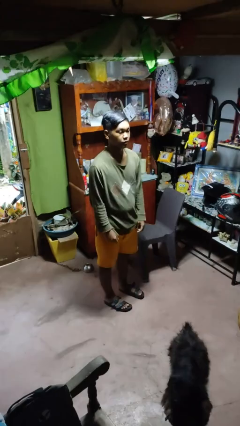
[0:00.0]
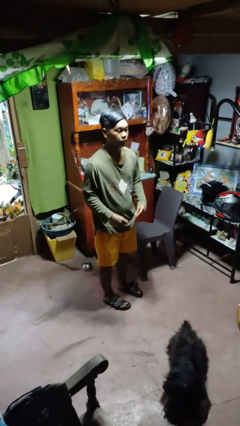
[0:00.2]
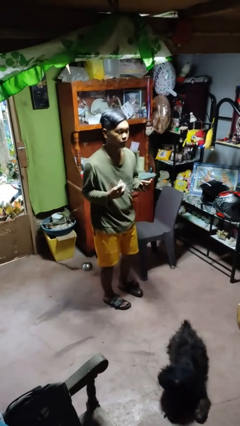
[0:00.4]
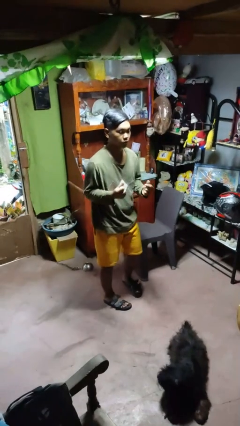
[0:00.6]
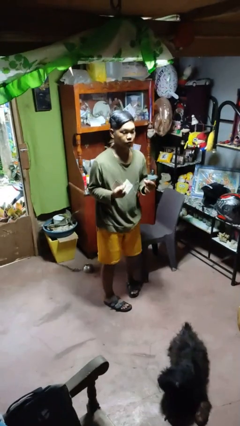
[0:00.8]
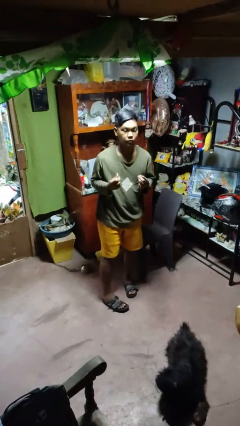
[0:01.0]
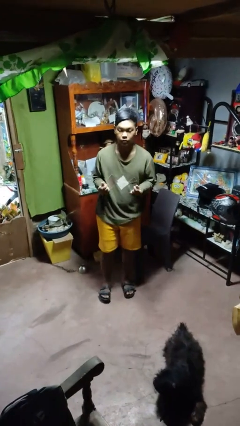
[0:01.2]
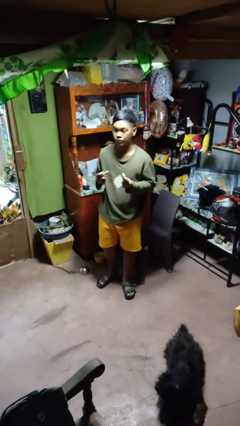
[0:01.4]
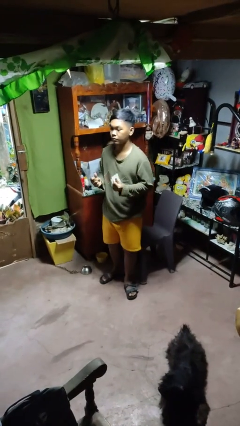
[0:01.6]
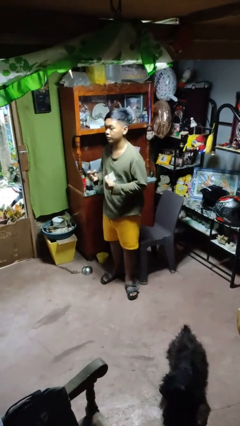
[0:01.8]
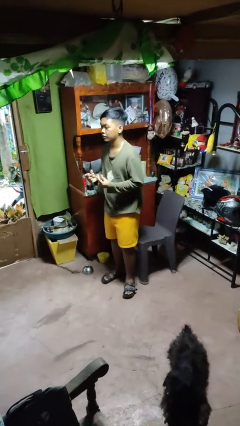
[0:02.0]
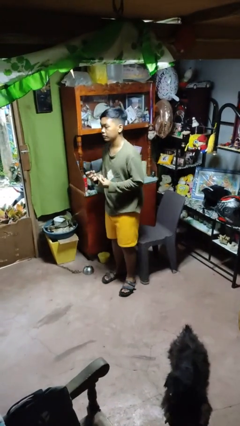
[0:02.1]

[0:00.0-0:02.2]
person snaps fingers

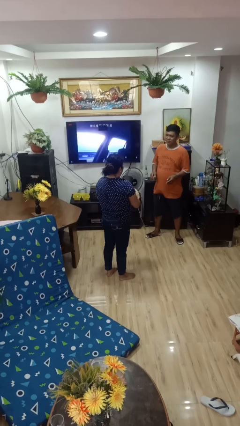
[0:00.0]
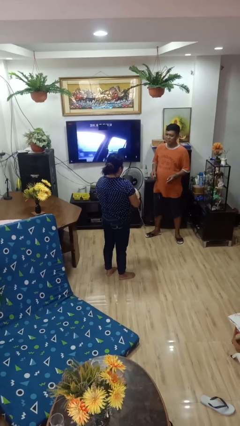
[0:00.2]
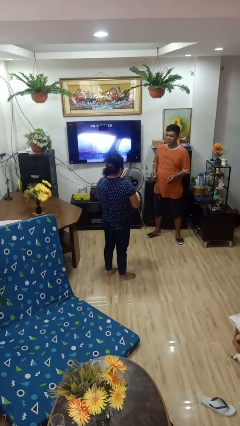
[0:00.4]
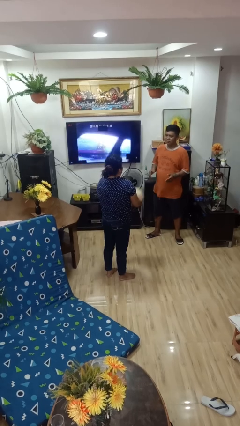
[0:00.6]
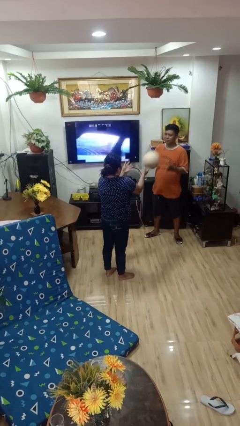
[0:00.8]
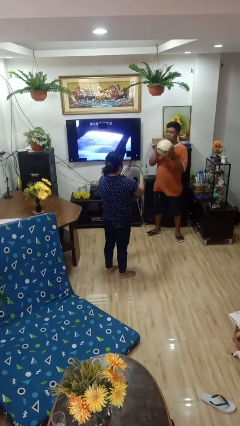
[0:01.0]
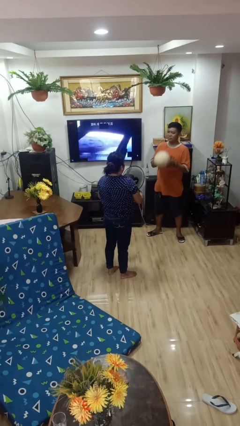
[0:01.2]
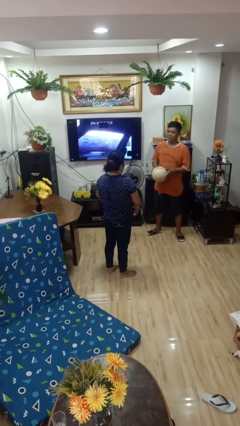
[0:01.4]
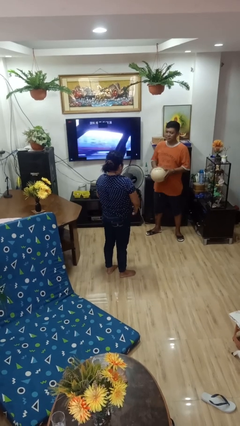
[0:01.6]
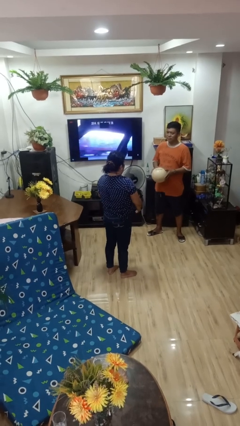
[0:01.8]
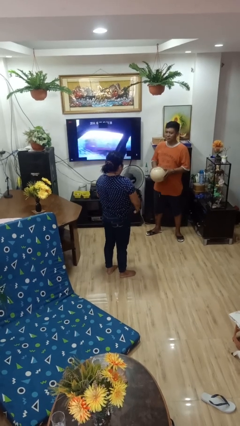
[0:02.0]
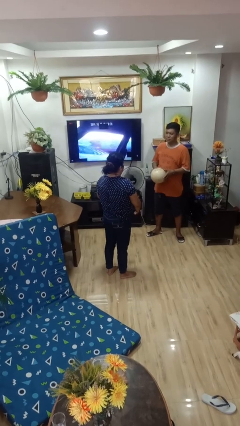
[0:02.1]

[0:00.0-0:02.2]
person throws object to person

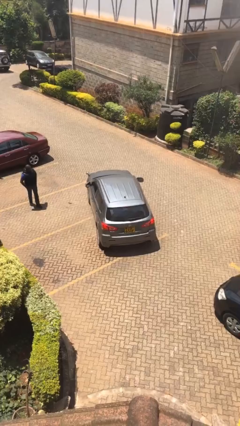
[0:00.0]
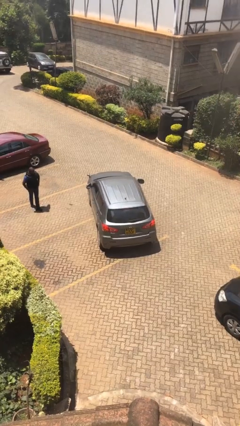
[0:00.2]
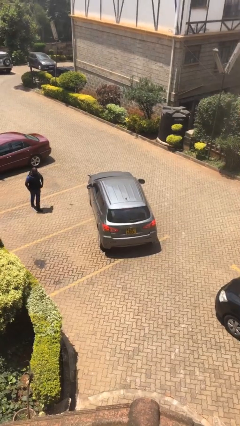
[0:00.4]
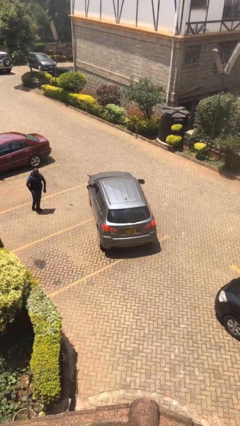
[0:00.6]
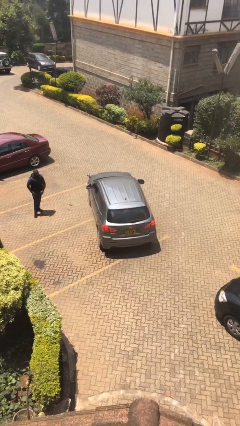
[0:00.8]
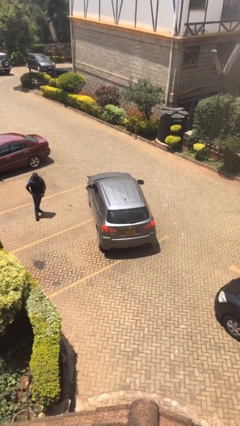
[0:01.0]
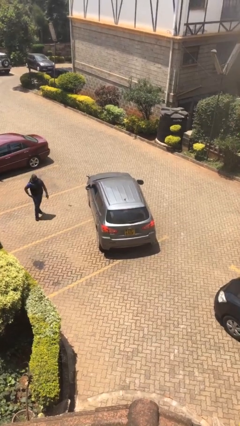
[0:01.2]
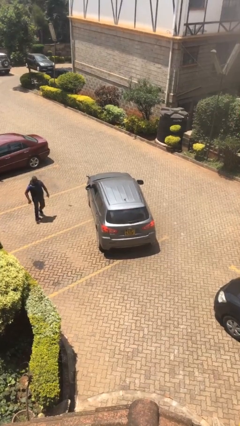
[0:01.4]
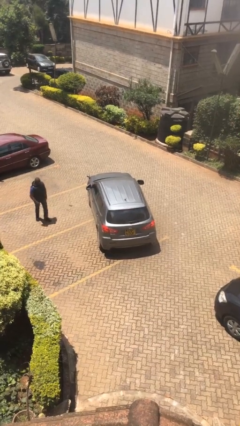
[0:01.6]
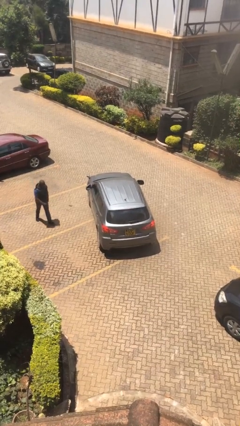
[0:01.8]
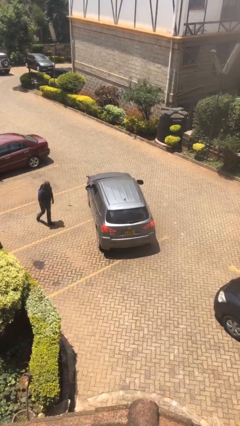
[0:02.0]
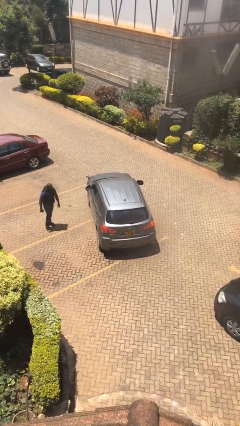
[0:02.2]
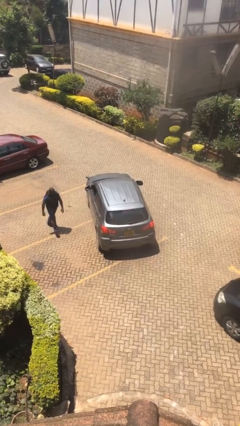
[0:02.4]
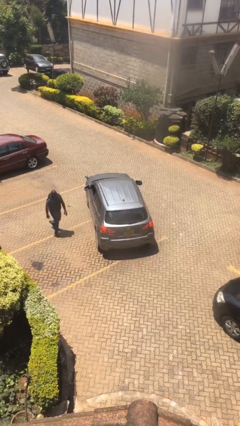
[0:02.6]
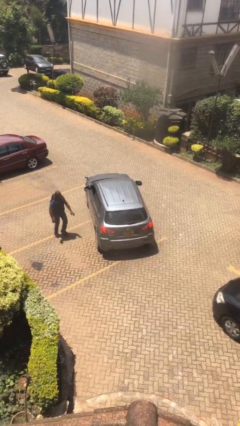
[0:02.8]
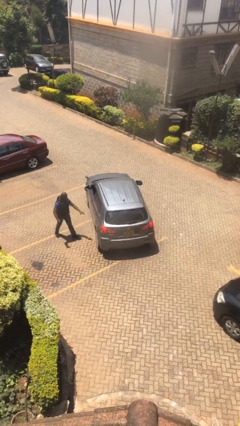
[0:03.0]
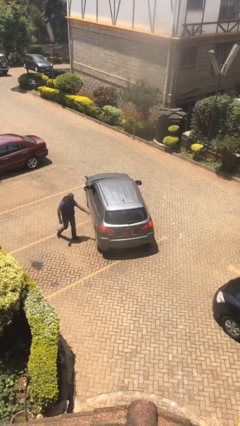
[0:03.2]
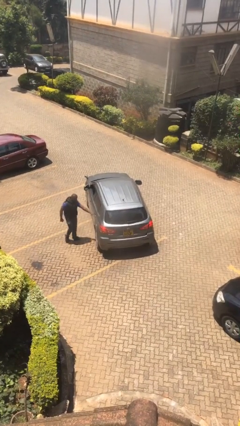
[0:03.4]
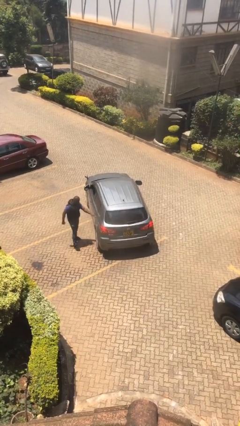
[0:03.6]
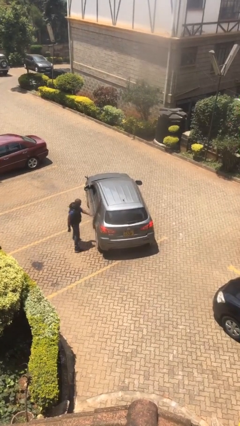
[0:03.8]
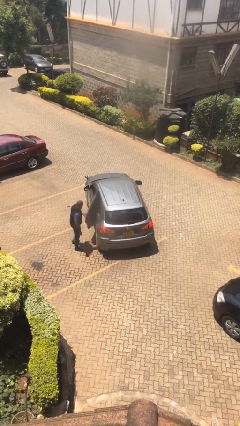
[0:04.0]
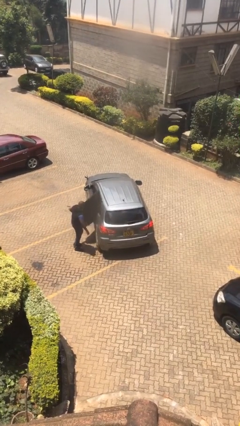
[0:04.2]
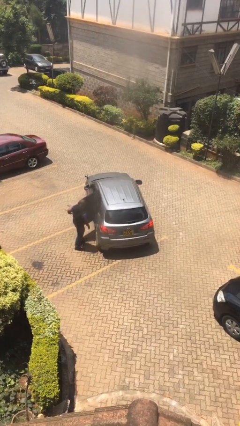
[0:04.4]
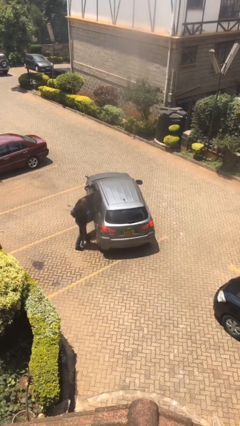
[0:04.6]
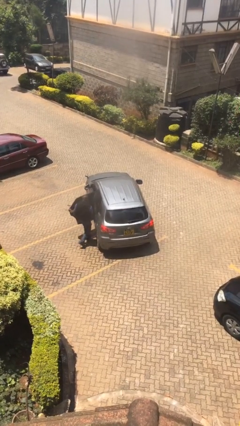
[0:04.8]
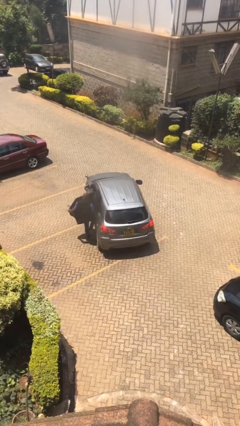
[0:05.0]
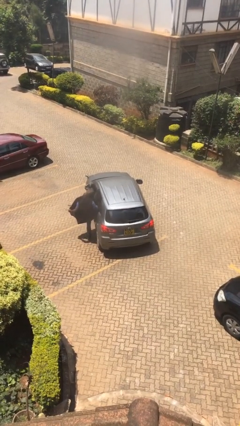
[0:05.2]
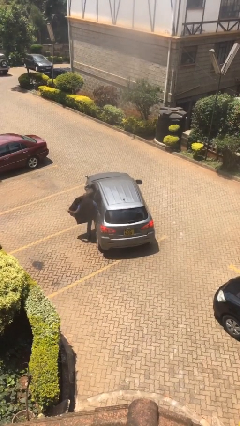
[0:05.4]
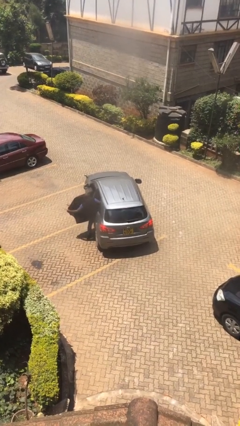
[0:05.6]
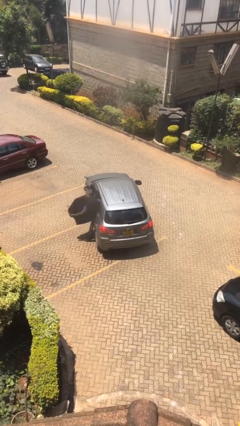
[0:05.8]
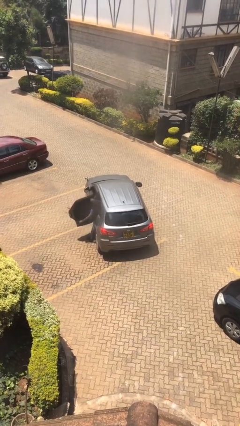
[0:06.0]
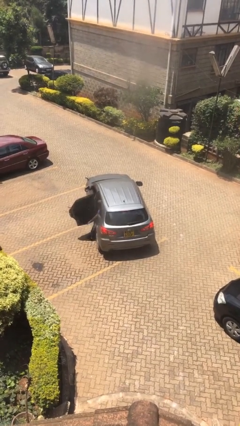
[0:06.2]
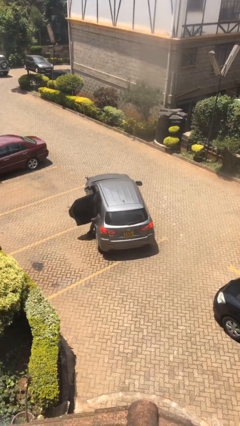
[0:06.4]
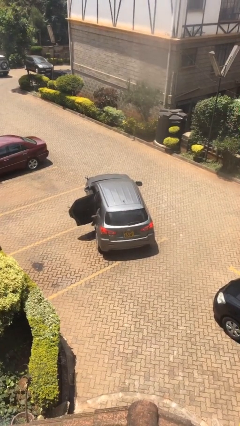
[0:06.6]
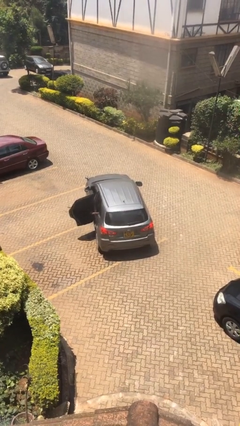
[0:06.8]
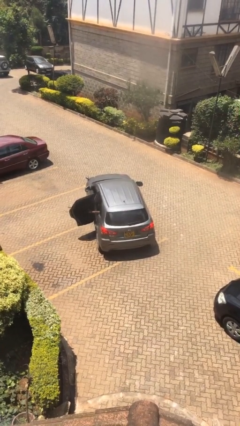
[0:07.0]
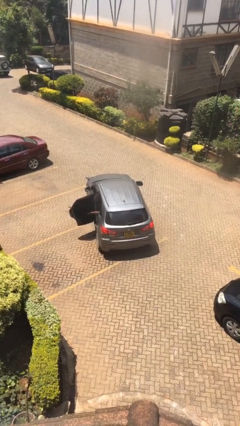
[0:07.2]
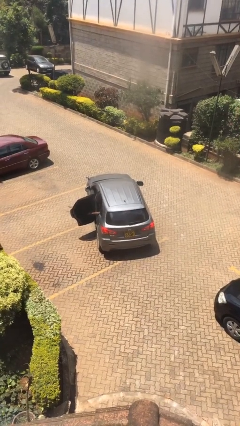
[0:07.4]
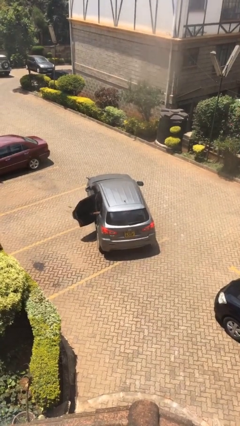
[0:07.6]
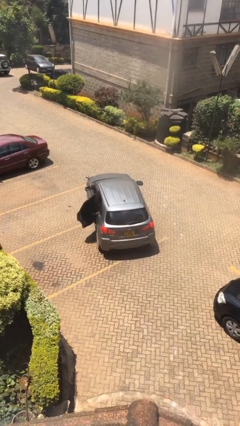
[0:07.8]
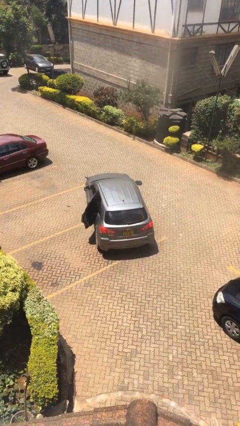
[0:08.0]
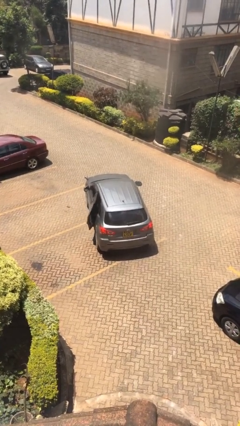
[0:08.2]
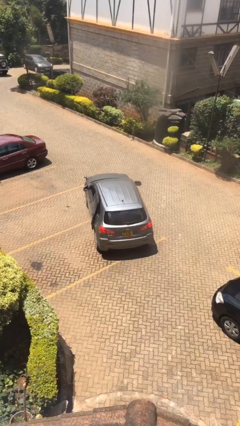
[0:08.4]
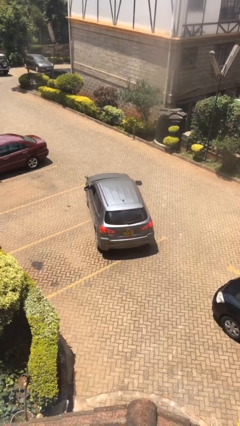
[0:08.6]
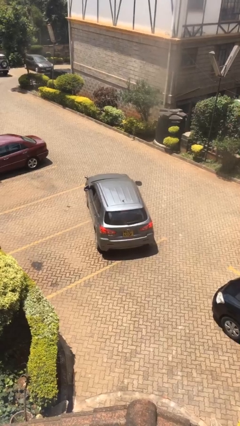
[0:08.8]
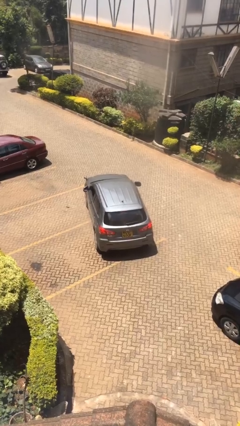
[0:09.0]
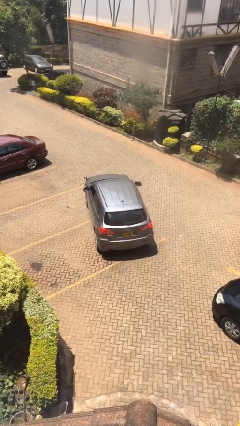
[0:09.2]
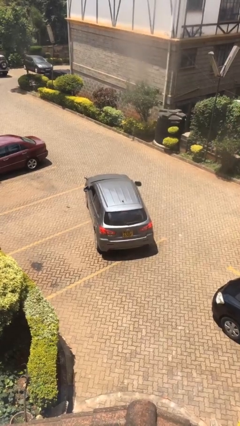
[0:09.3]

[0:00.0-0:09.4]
car picks up person

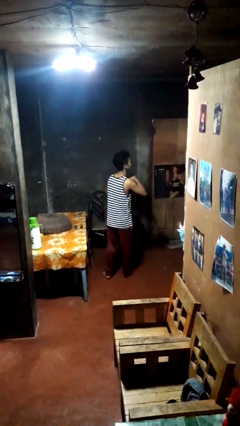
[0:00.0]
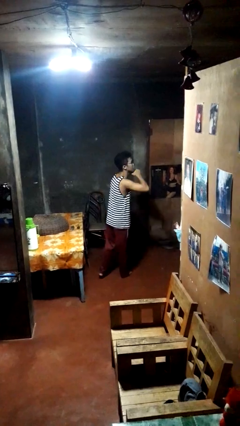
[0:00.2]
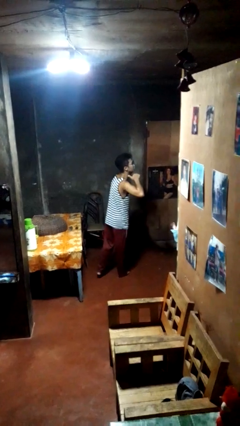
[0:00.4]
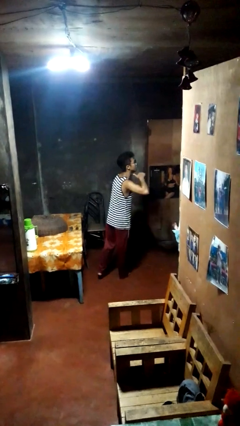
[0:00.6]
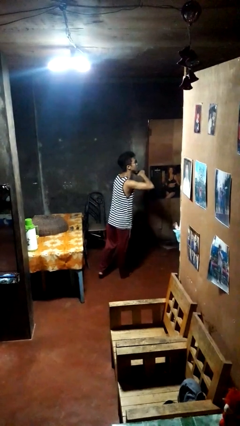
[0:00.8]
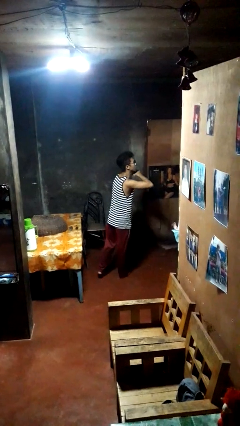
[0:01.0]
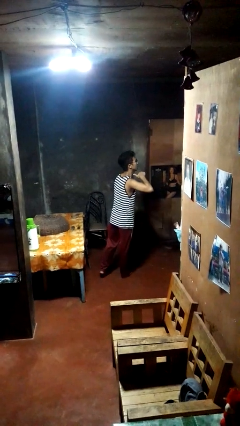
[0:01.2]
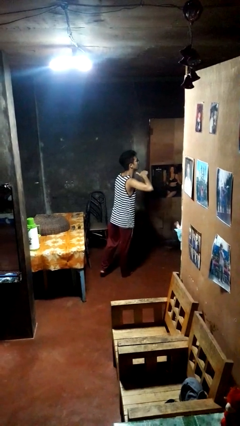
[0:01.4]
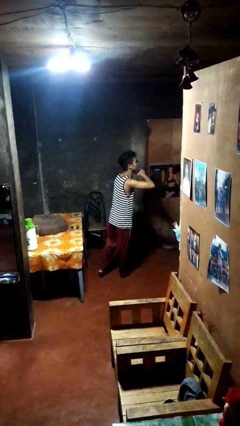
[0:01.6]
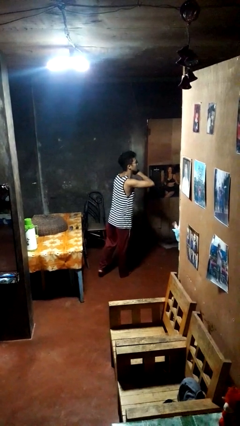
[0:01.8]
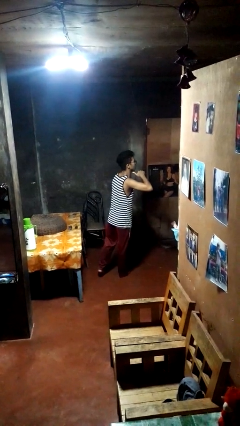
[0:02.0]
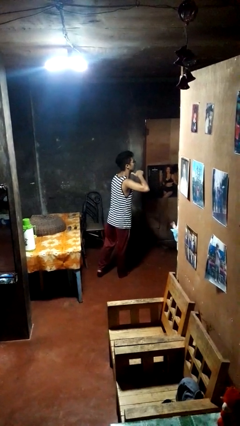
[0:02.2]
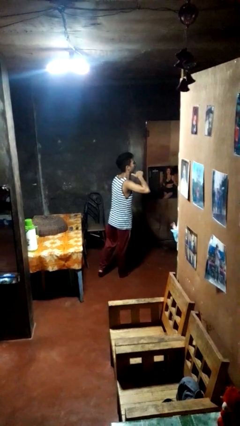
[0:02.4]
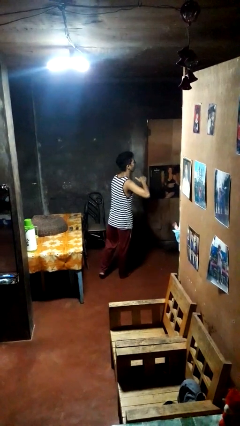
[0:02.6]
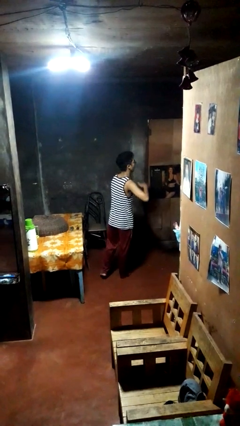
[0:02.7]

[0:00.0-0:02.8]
person gestures cut

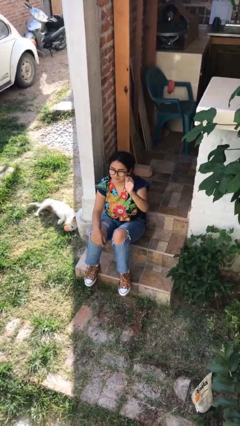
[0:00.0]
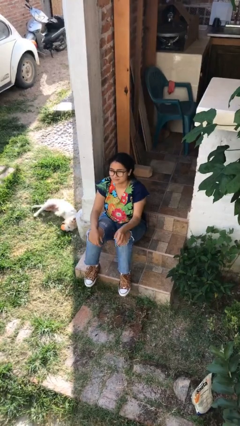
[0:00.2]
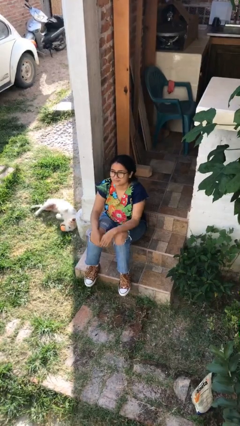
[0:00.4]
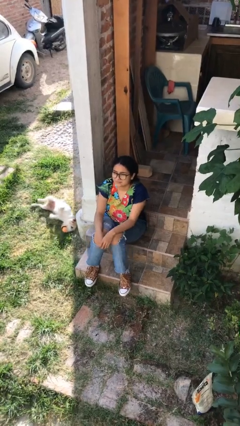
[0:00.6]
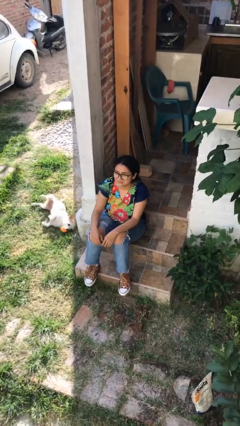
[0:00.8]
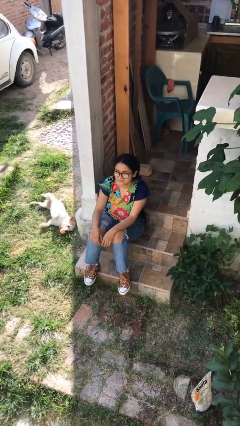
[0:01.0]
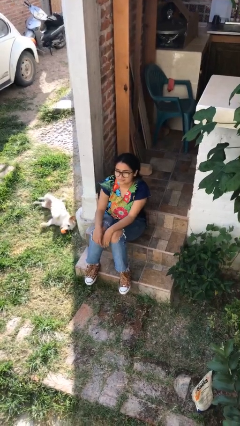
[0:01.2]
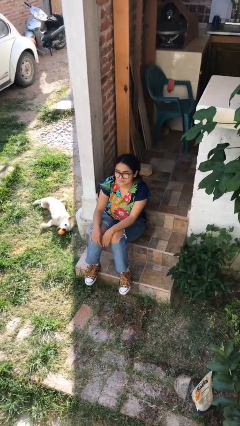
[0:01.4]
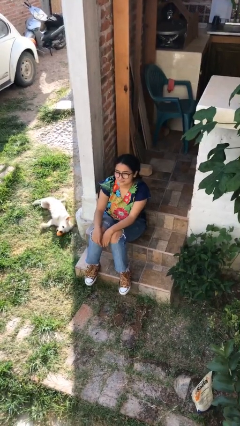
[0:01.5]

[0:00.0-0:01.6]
person gestures lower hand
